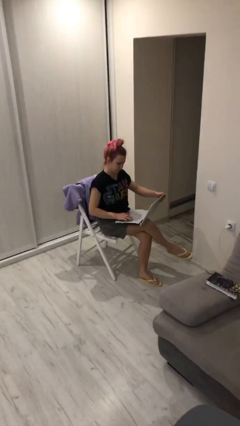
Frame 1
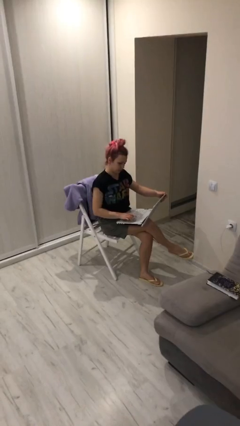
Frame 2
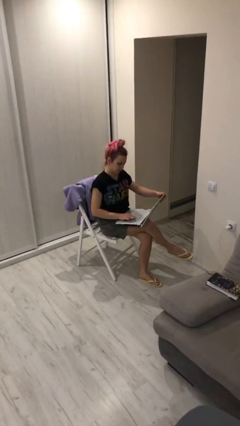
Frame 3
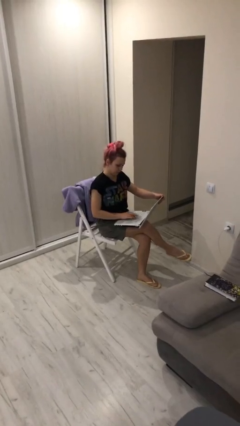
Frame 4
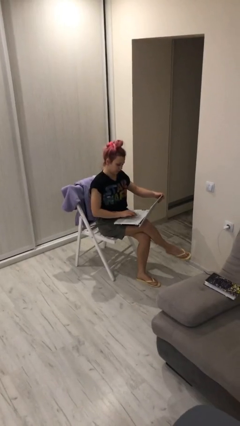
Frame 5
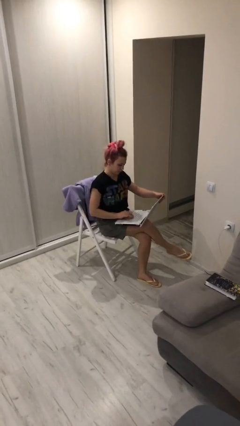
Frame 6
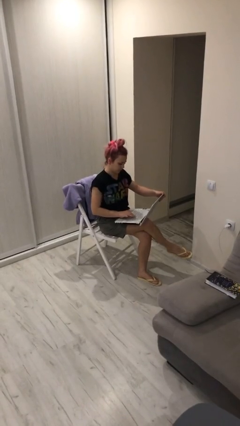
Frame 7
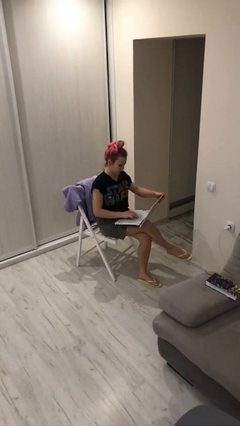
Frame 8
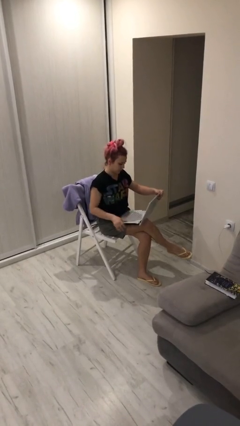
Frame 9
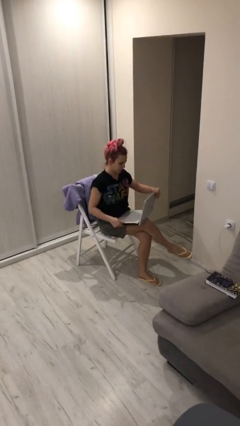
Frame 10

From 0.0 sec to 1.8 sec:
person interacts with laptop

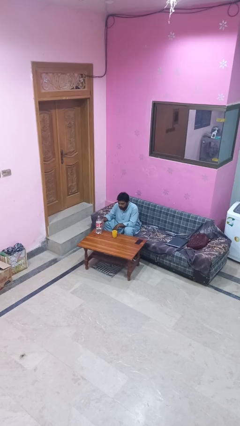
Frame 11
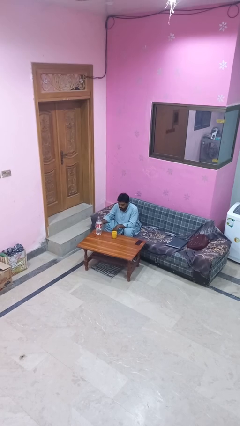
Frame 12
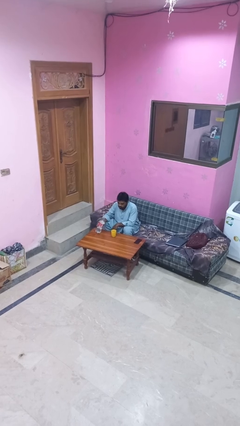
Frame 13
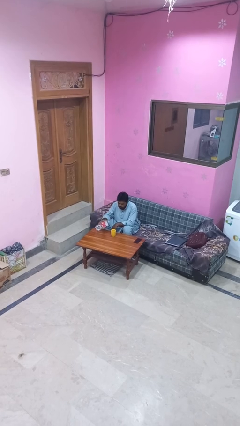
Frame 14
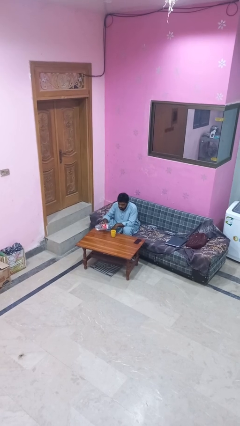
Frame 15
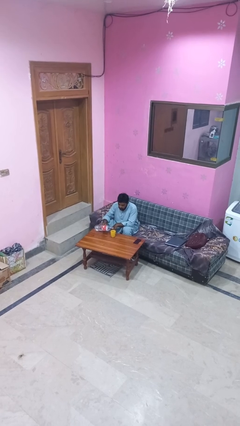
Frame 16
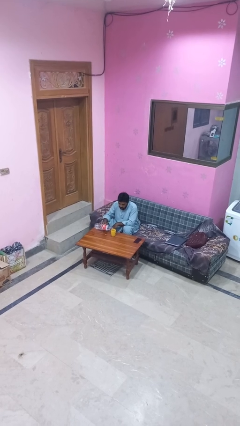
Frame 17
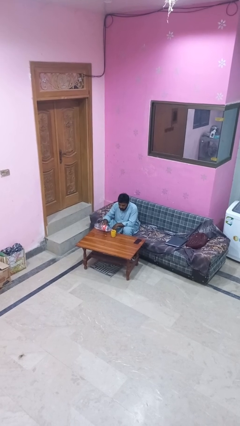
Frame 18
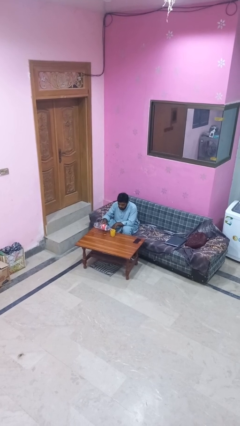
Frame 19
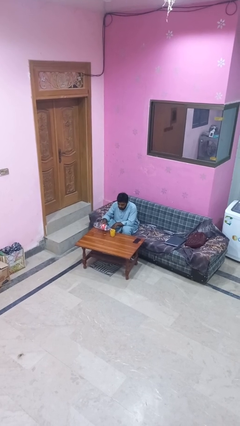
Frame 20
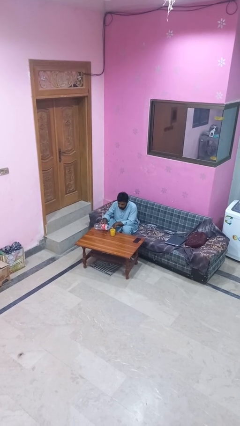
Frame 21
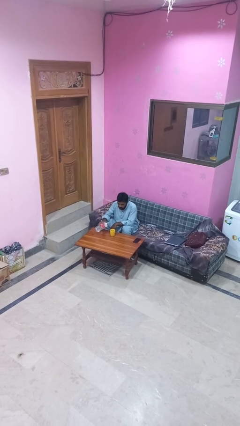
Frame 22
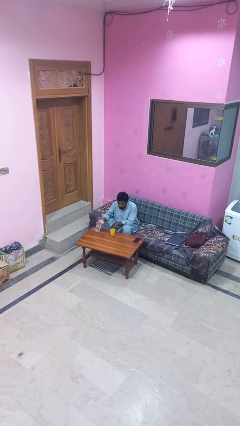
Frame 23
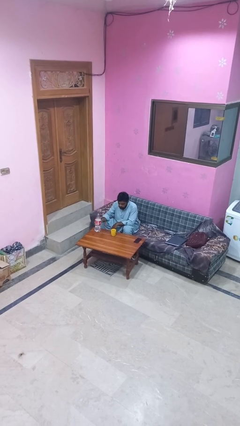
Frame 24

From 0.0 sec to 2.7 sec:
person pours liquid into cup

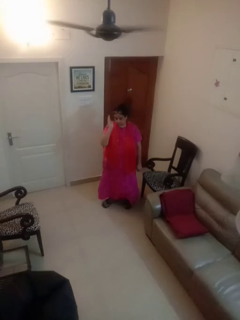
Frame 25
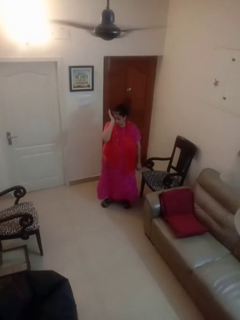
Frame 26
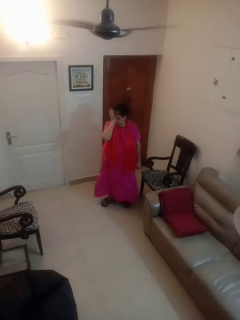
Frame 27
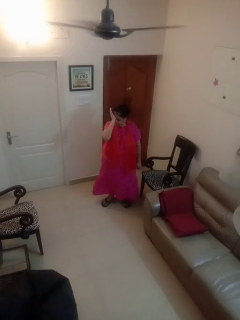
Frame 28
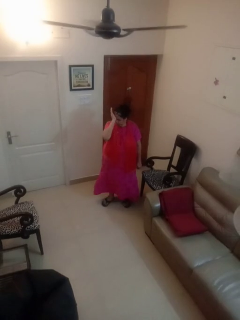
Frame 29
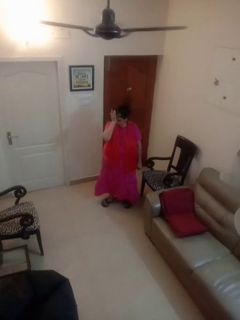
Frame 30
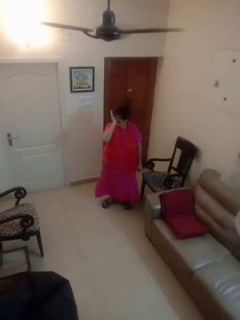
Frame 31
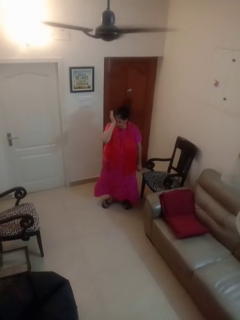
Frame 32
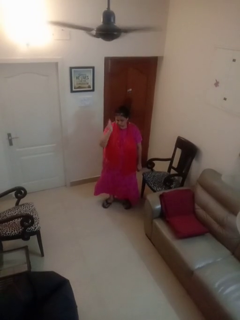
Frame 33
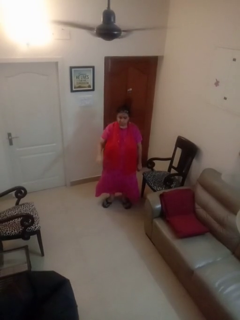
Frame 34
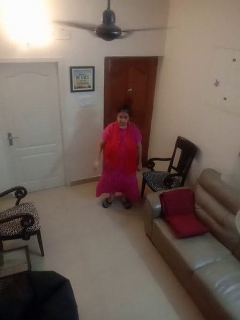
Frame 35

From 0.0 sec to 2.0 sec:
person rubs eyes

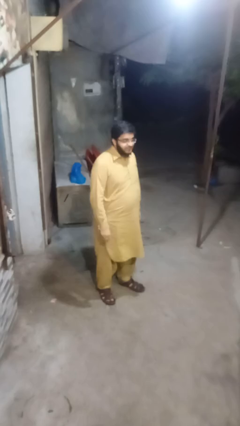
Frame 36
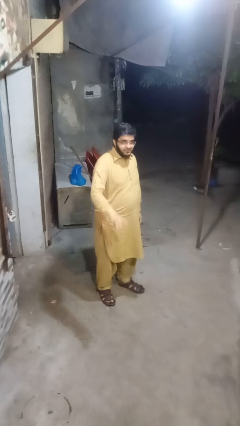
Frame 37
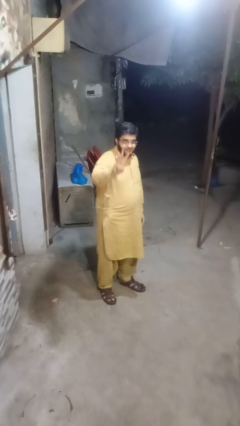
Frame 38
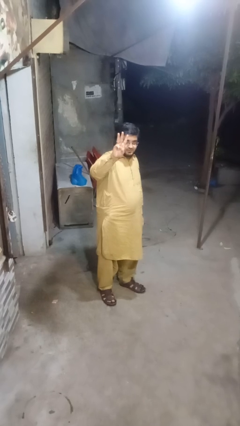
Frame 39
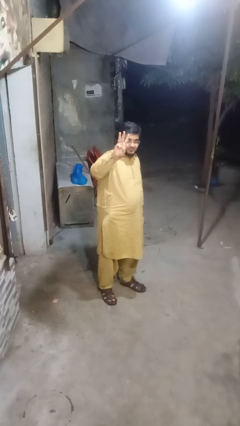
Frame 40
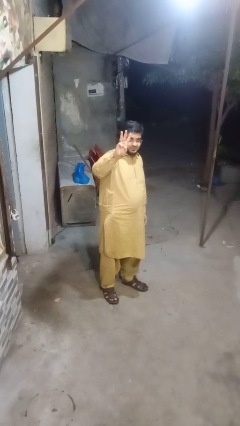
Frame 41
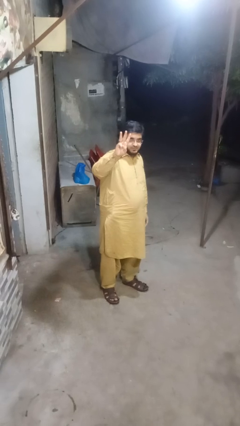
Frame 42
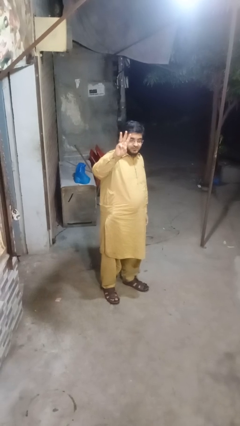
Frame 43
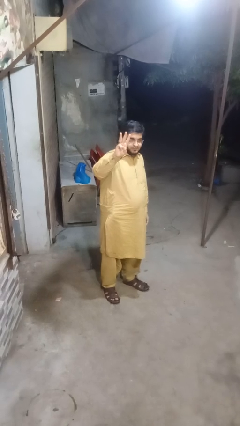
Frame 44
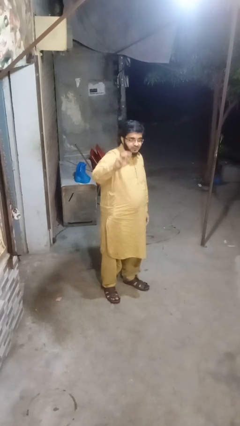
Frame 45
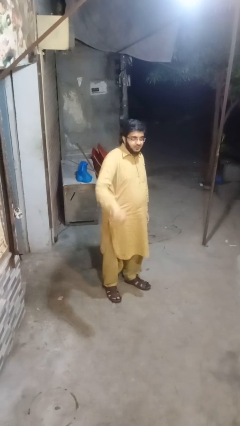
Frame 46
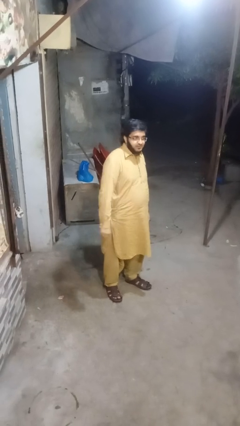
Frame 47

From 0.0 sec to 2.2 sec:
person gestures number three

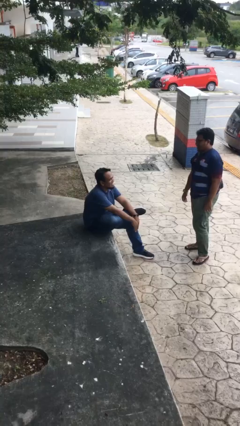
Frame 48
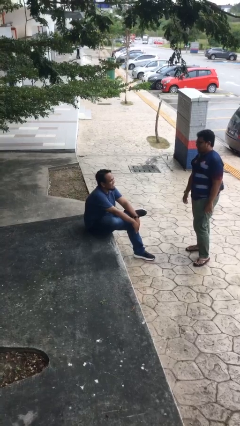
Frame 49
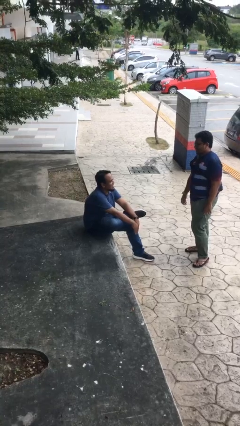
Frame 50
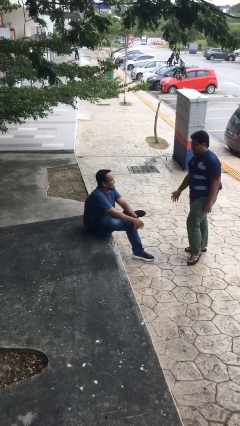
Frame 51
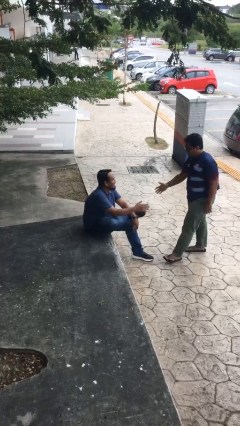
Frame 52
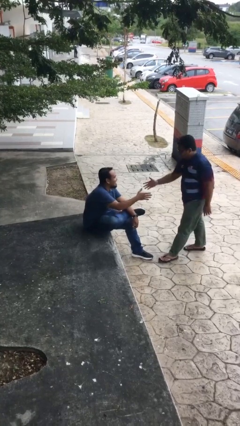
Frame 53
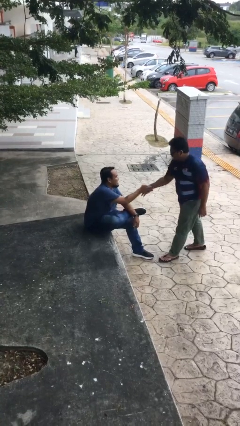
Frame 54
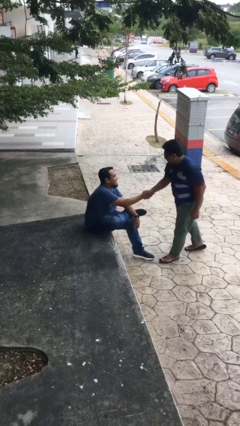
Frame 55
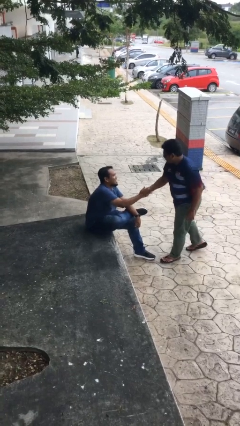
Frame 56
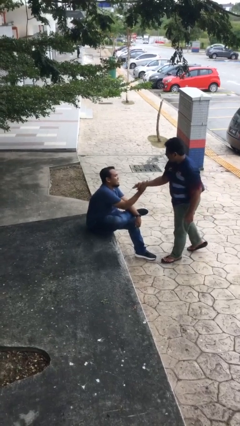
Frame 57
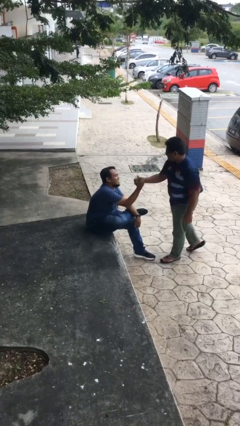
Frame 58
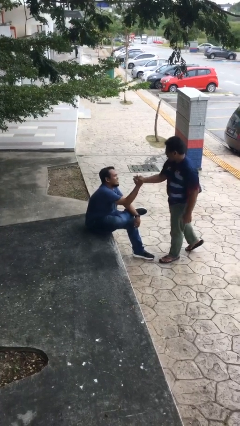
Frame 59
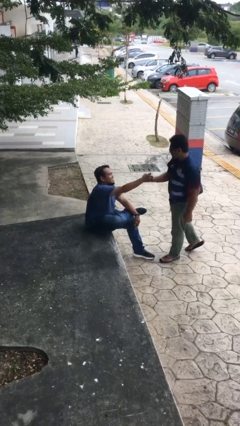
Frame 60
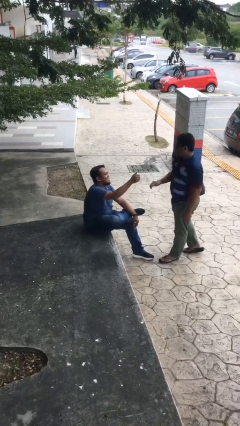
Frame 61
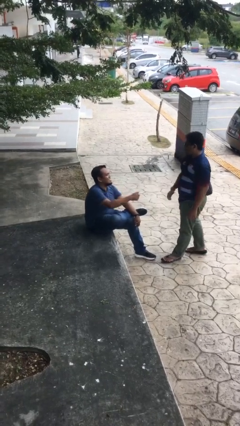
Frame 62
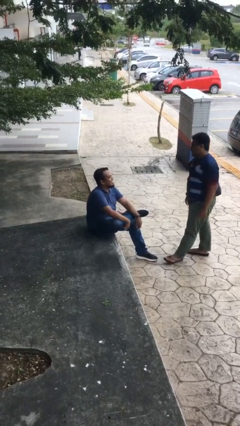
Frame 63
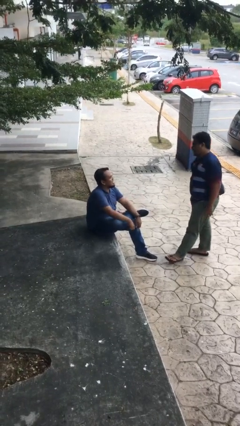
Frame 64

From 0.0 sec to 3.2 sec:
person shakes hand

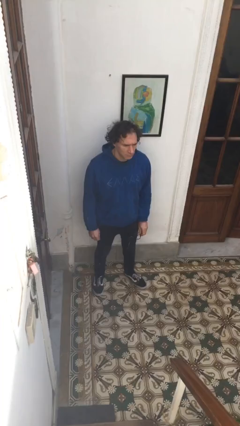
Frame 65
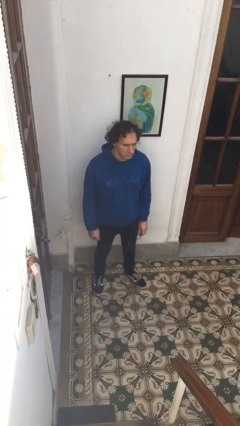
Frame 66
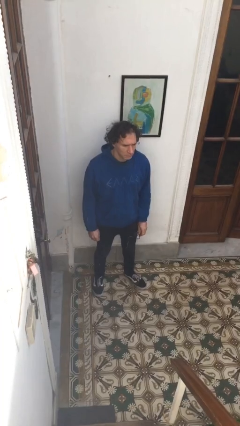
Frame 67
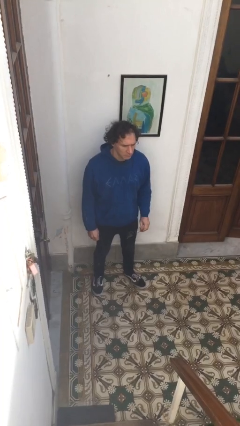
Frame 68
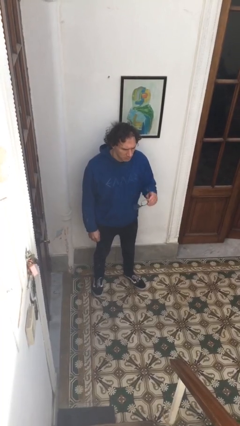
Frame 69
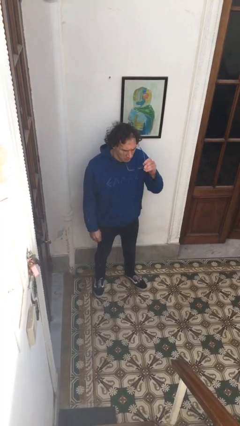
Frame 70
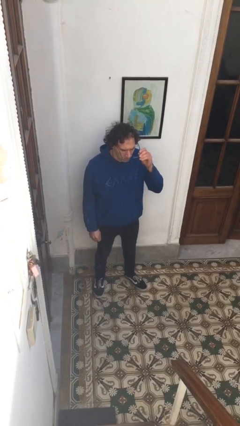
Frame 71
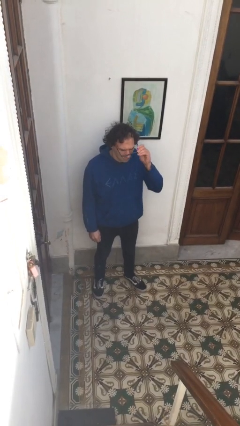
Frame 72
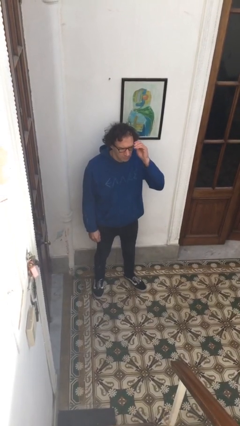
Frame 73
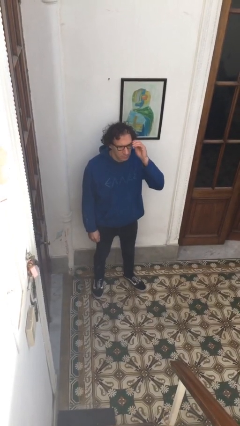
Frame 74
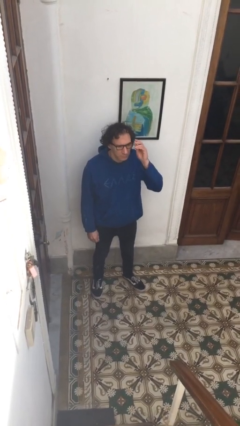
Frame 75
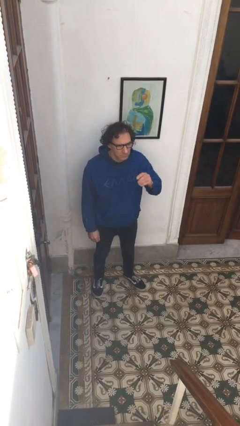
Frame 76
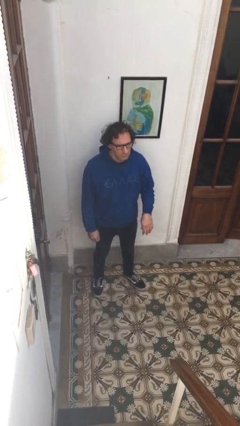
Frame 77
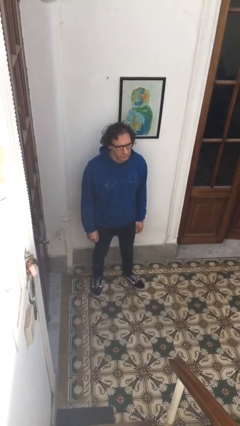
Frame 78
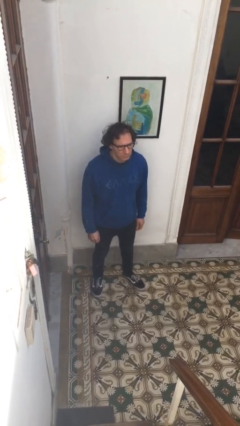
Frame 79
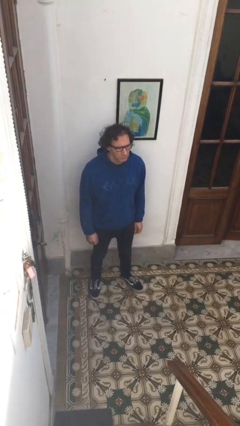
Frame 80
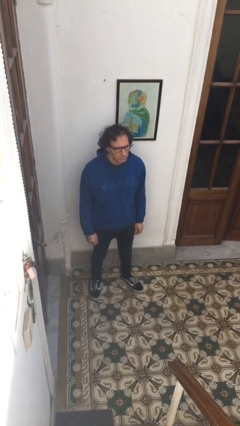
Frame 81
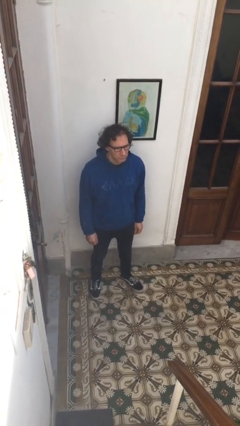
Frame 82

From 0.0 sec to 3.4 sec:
person puts on glasses

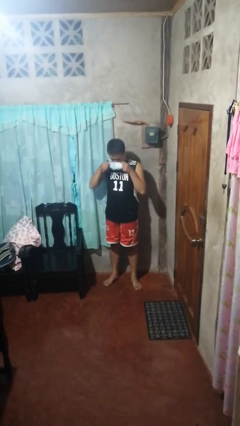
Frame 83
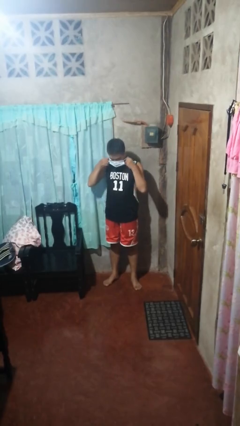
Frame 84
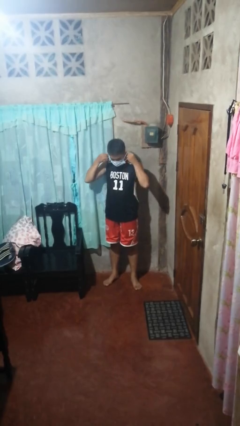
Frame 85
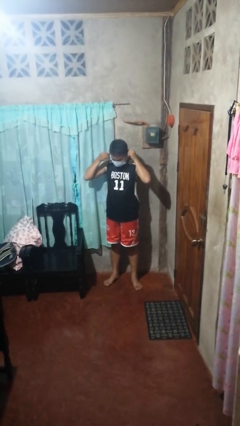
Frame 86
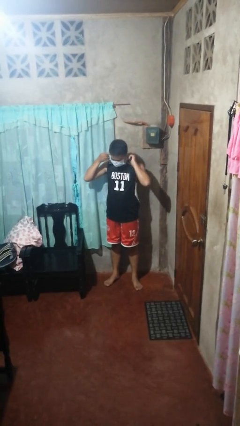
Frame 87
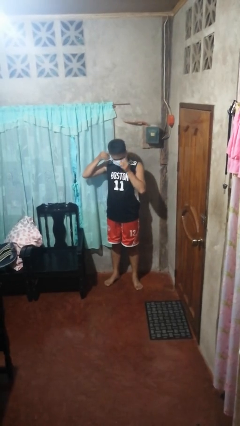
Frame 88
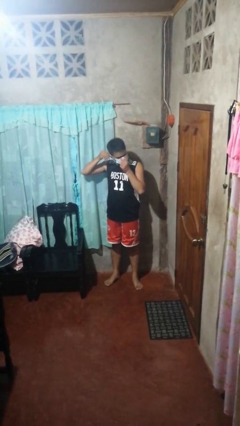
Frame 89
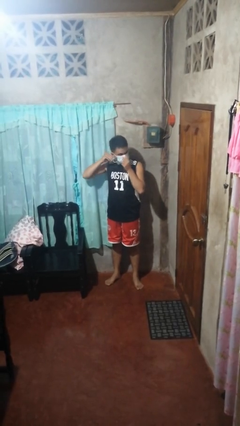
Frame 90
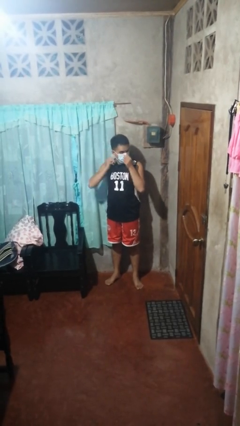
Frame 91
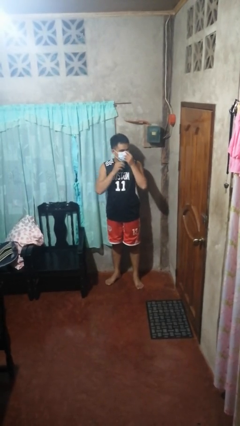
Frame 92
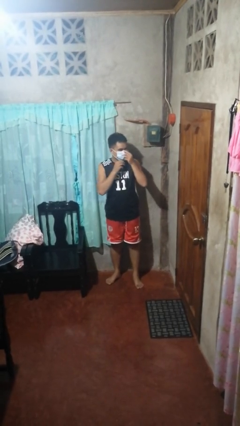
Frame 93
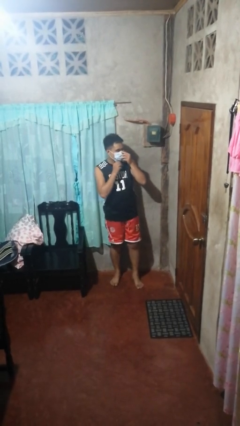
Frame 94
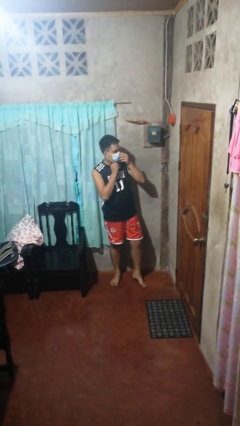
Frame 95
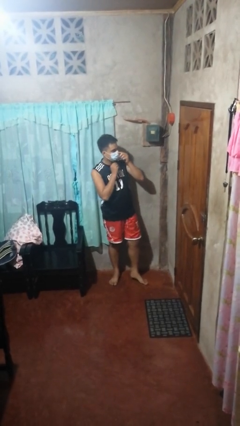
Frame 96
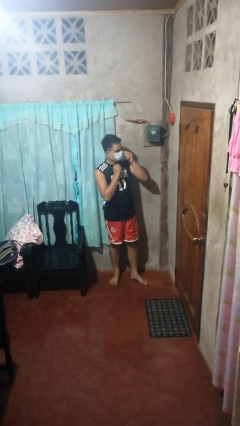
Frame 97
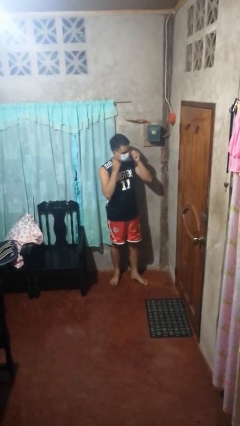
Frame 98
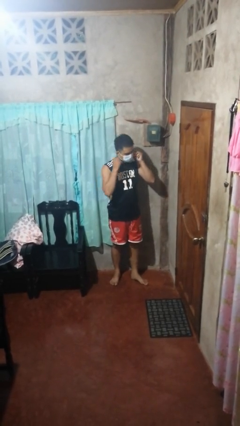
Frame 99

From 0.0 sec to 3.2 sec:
person puts on facemask
